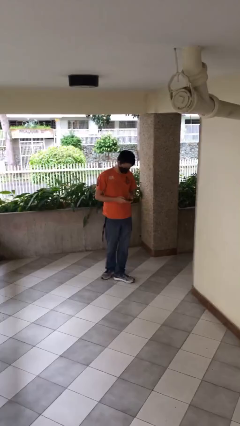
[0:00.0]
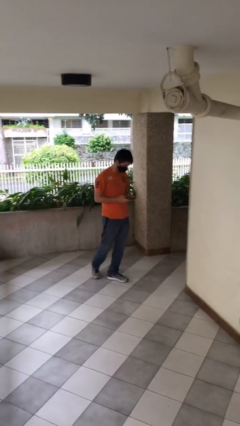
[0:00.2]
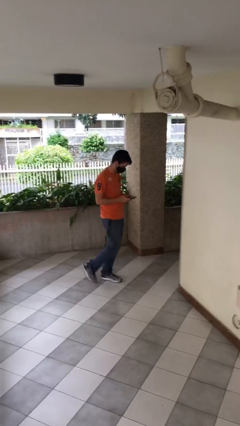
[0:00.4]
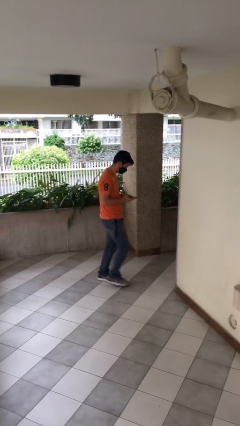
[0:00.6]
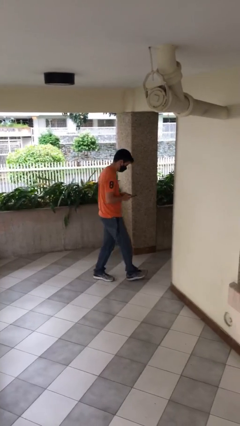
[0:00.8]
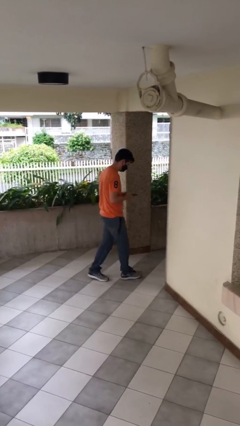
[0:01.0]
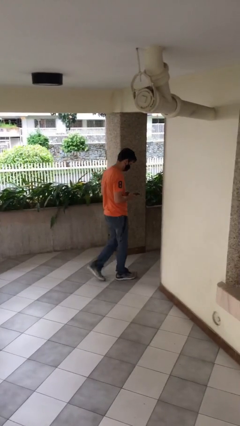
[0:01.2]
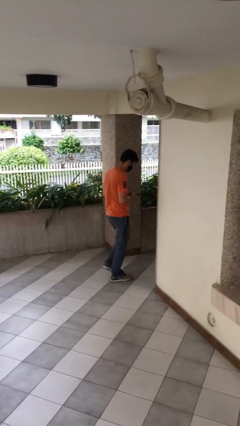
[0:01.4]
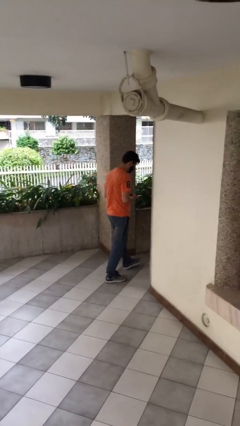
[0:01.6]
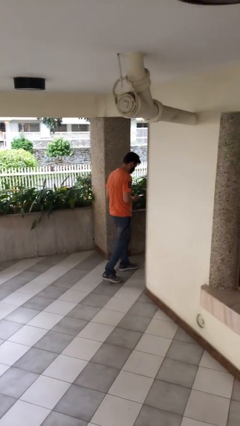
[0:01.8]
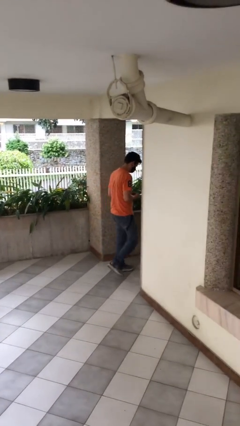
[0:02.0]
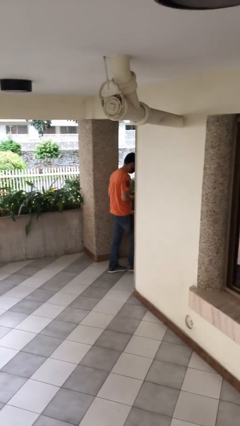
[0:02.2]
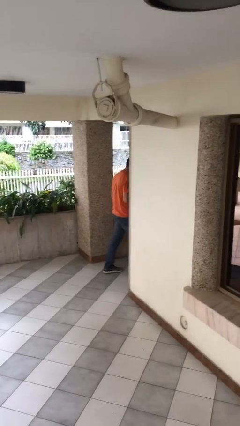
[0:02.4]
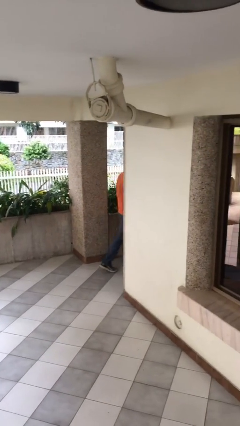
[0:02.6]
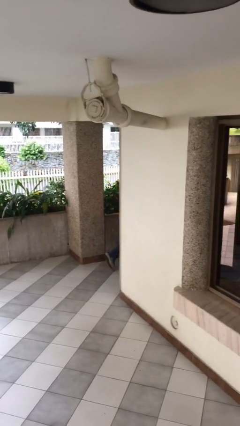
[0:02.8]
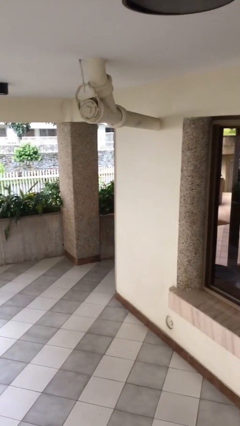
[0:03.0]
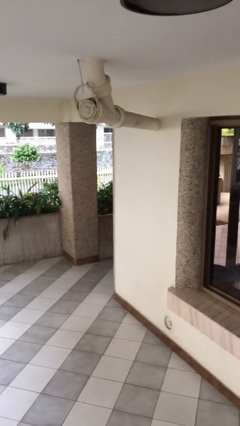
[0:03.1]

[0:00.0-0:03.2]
person exits scene through structure

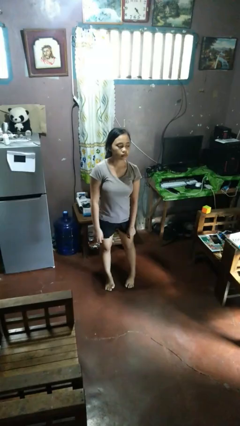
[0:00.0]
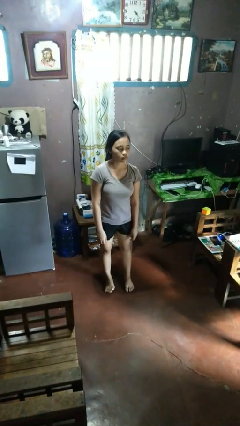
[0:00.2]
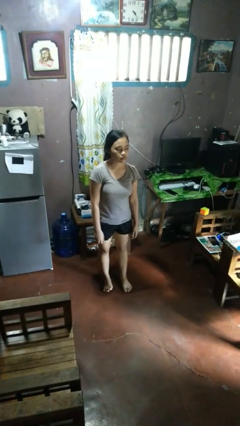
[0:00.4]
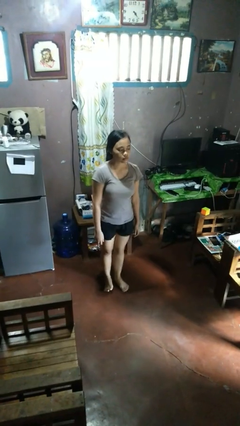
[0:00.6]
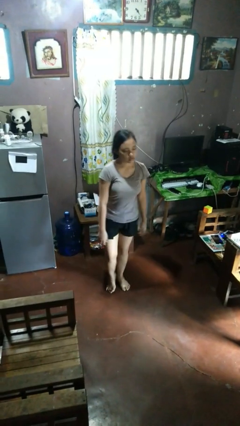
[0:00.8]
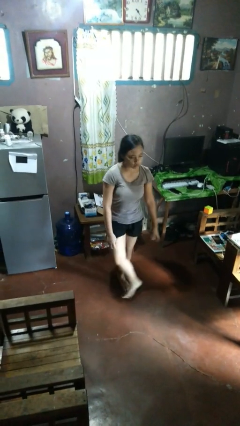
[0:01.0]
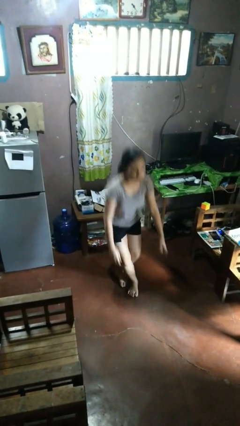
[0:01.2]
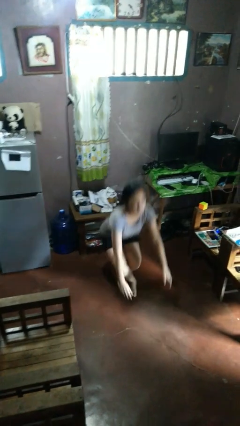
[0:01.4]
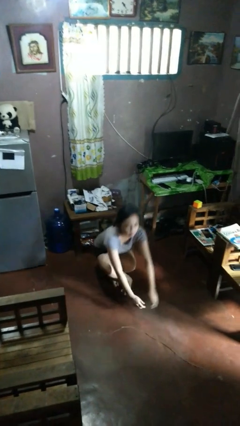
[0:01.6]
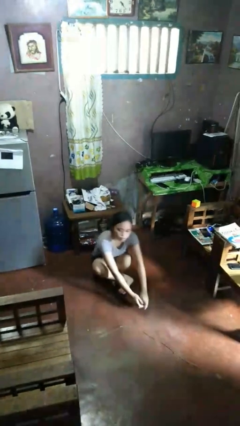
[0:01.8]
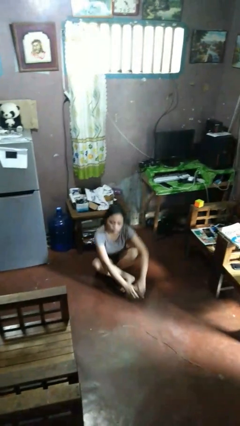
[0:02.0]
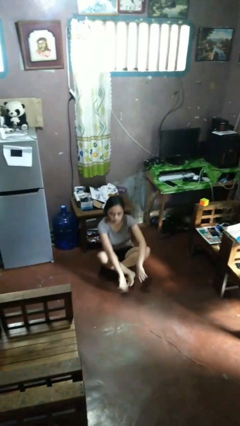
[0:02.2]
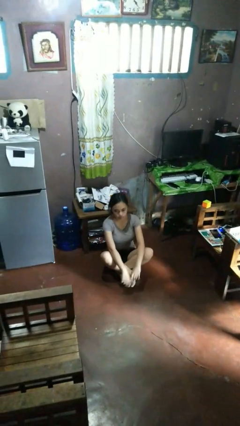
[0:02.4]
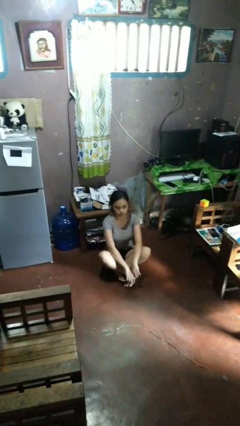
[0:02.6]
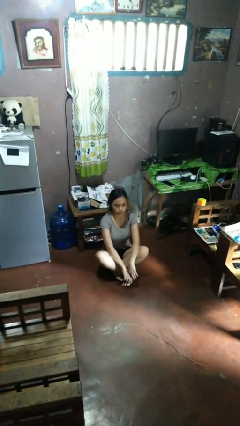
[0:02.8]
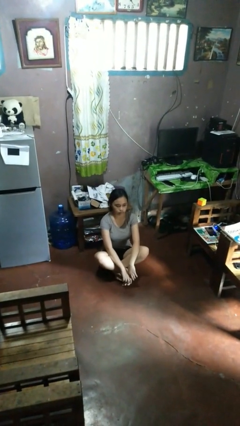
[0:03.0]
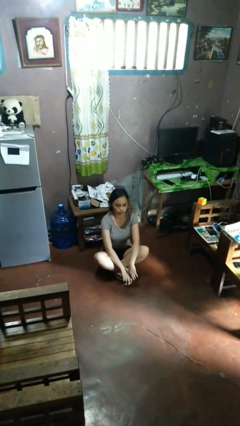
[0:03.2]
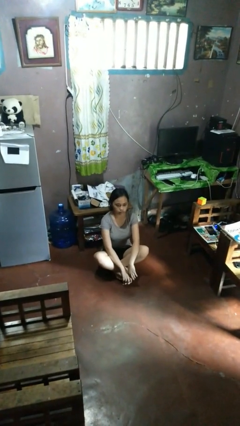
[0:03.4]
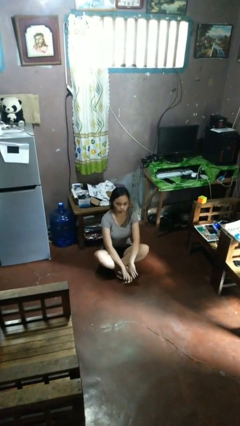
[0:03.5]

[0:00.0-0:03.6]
person sits crisscross

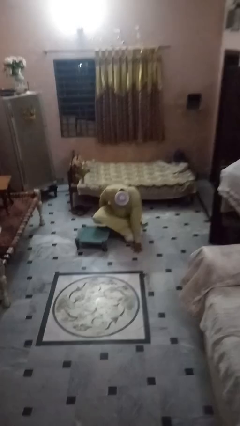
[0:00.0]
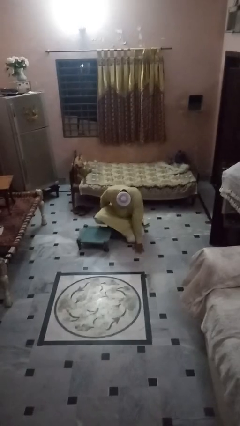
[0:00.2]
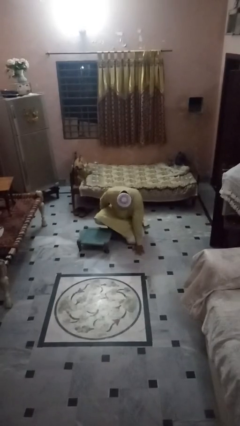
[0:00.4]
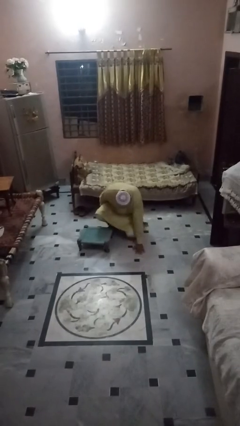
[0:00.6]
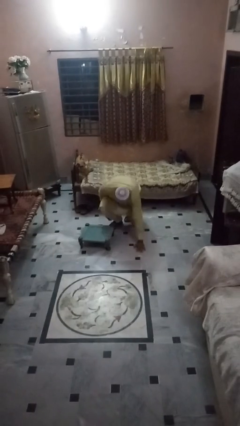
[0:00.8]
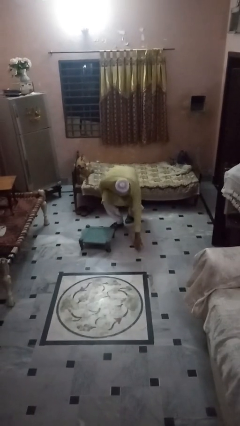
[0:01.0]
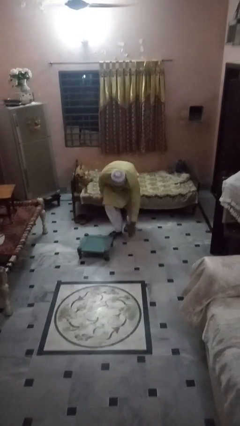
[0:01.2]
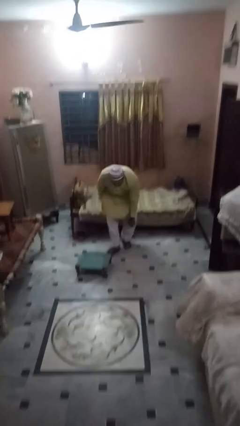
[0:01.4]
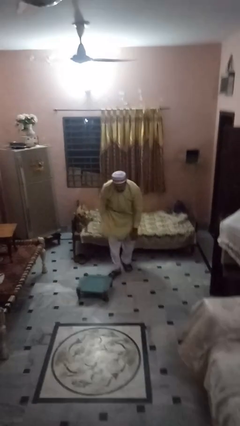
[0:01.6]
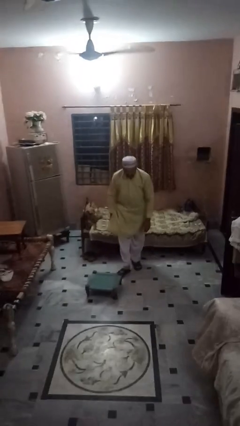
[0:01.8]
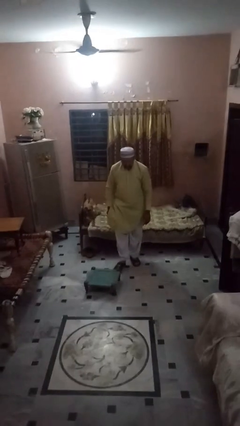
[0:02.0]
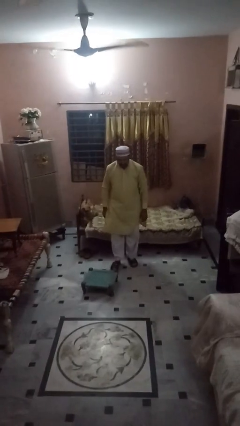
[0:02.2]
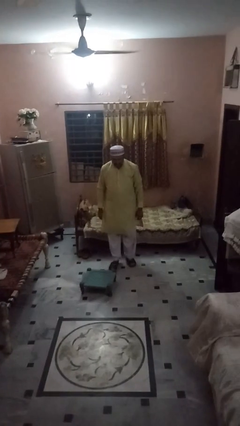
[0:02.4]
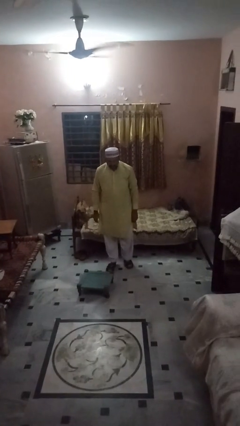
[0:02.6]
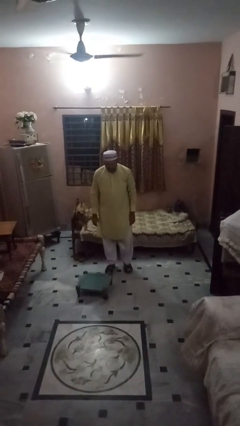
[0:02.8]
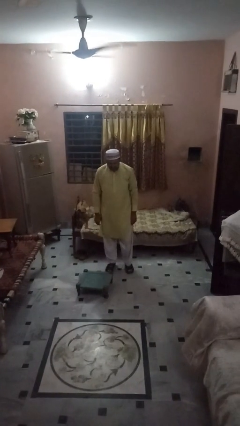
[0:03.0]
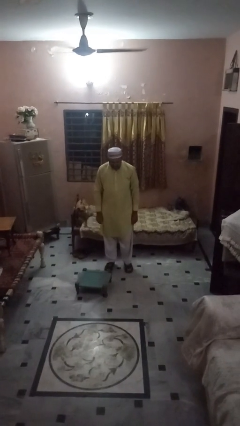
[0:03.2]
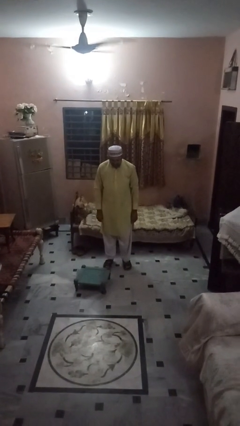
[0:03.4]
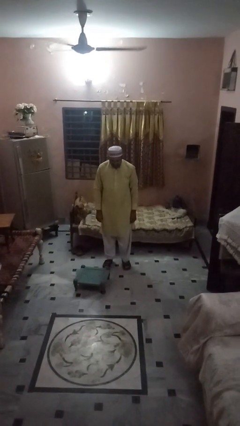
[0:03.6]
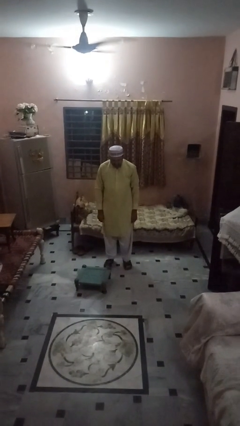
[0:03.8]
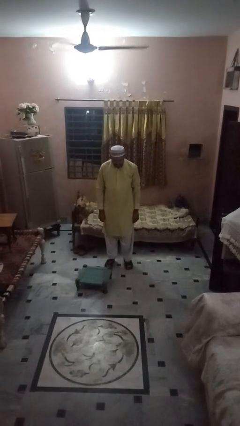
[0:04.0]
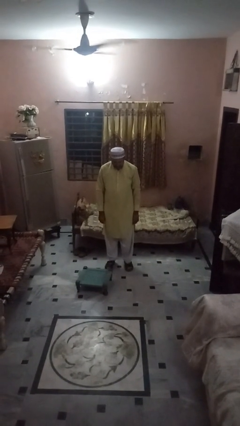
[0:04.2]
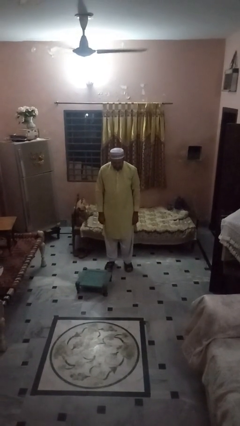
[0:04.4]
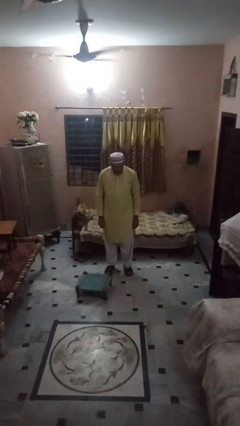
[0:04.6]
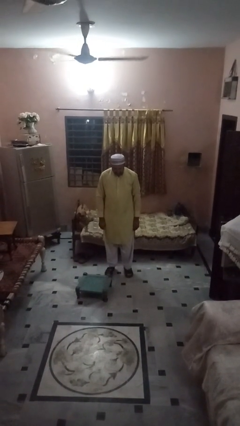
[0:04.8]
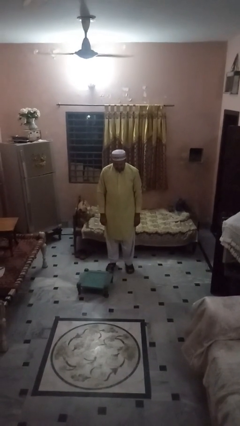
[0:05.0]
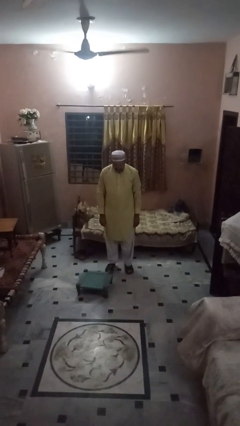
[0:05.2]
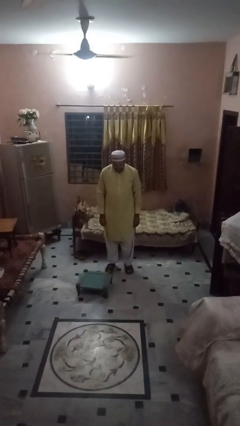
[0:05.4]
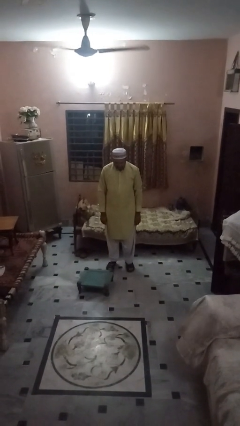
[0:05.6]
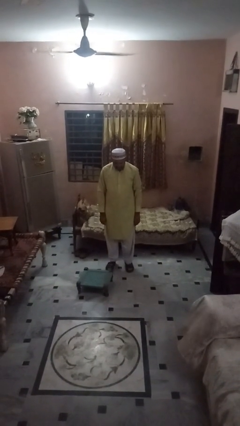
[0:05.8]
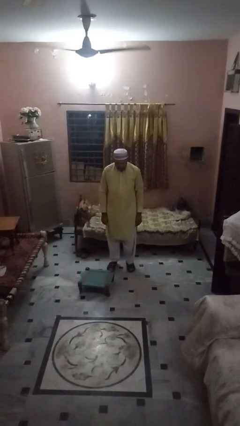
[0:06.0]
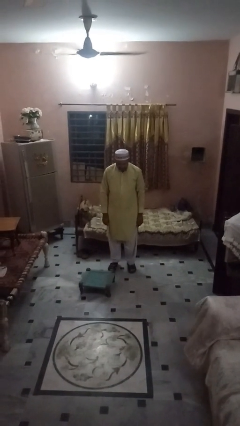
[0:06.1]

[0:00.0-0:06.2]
person stands up from floor

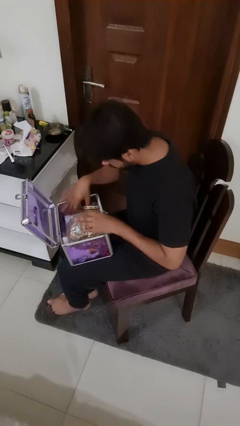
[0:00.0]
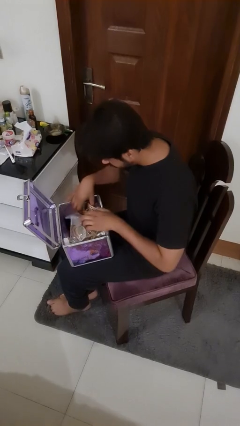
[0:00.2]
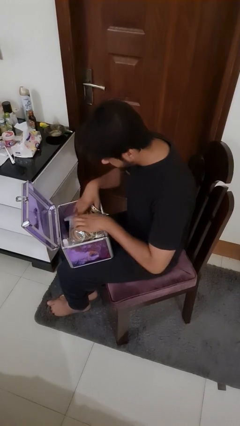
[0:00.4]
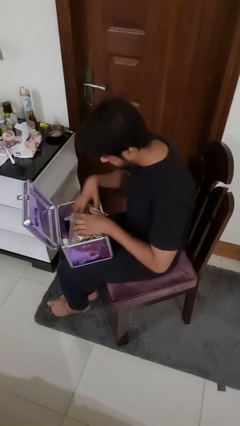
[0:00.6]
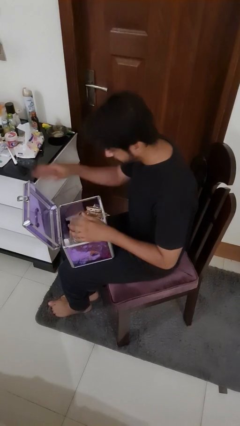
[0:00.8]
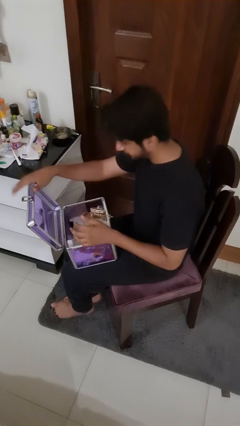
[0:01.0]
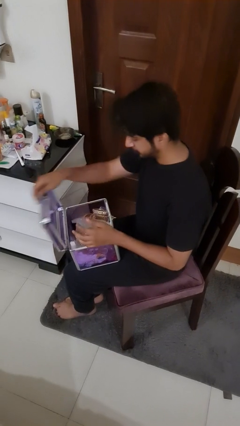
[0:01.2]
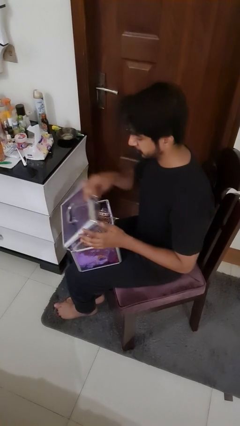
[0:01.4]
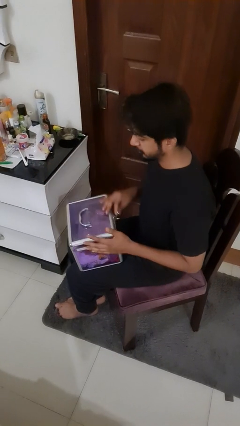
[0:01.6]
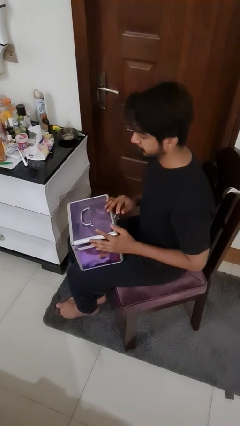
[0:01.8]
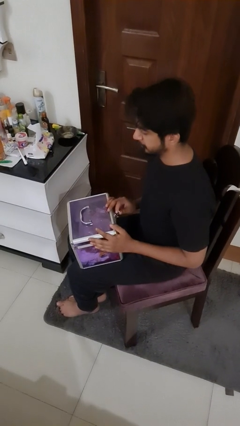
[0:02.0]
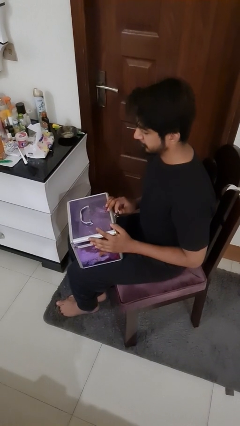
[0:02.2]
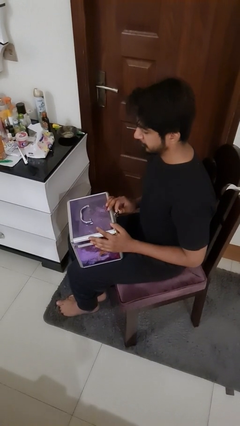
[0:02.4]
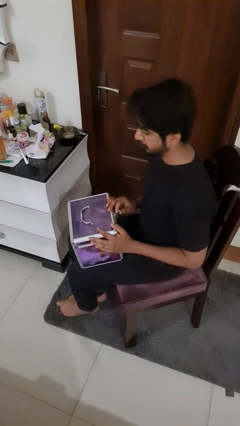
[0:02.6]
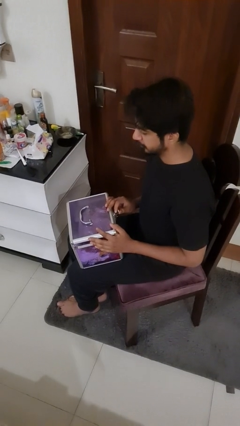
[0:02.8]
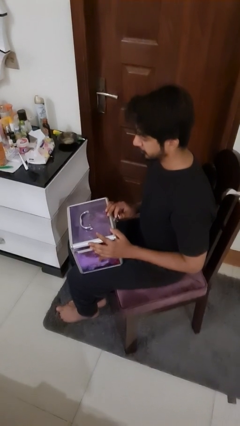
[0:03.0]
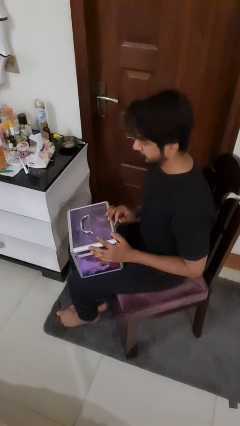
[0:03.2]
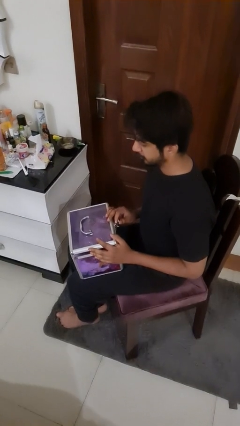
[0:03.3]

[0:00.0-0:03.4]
person closes jewelry box

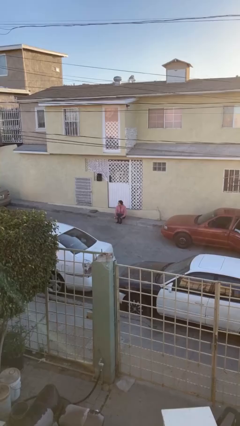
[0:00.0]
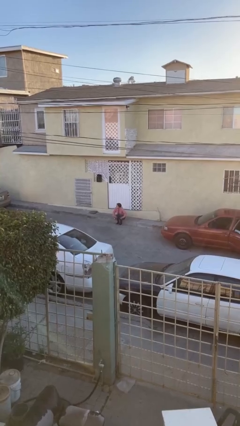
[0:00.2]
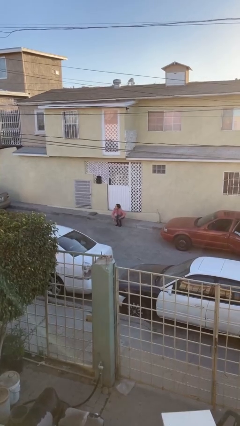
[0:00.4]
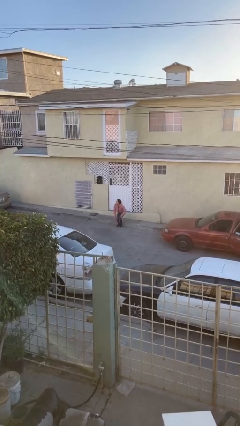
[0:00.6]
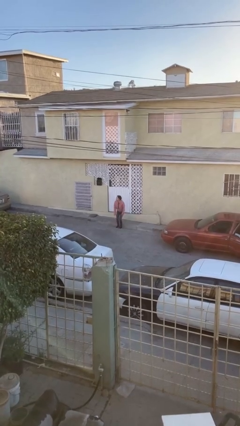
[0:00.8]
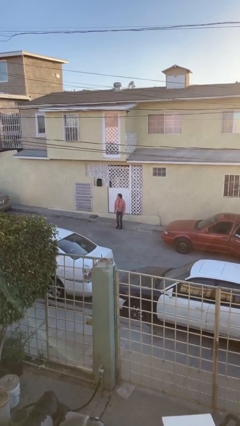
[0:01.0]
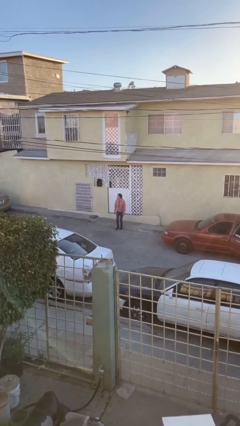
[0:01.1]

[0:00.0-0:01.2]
person stands up
